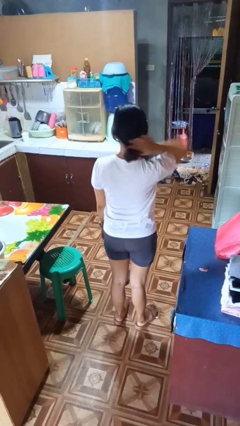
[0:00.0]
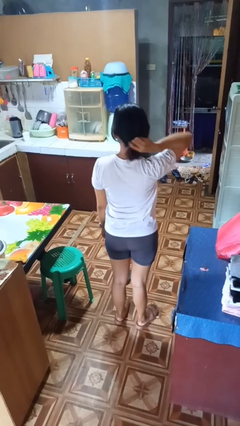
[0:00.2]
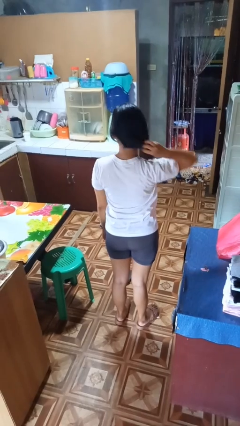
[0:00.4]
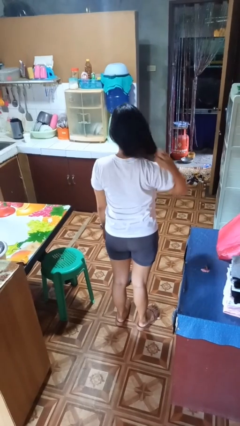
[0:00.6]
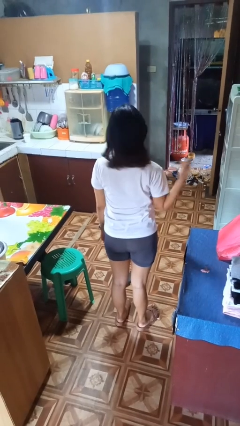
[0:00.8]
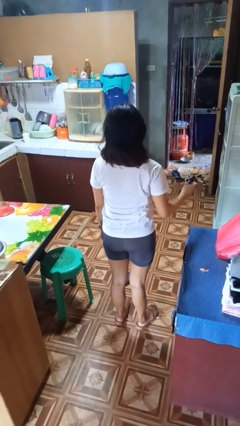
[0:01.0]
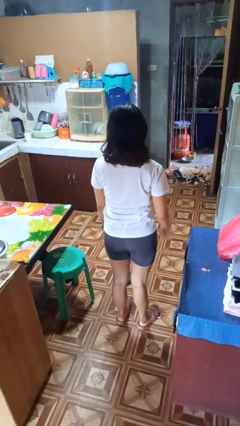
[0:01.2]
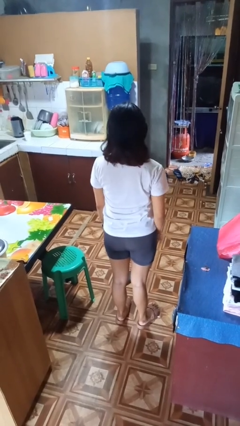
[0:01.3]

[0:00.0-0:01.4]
person takes off hairtie

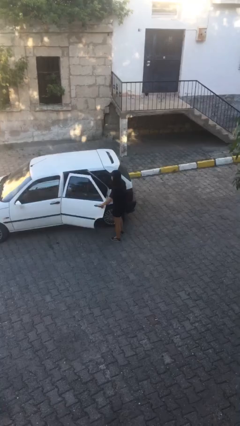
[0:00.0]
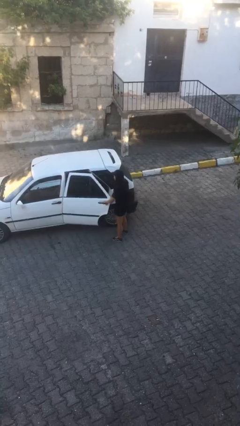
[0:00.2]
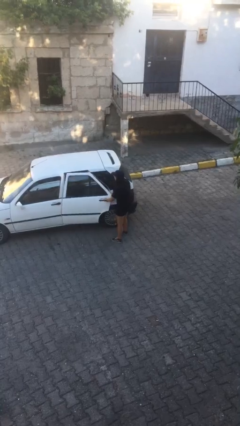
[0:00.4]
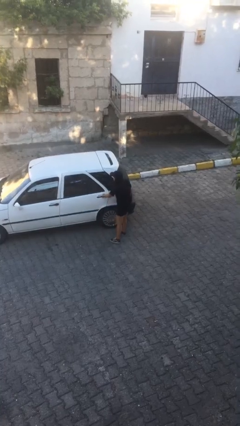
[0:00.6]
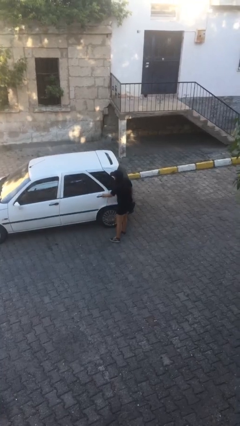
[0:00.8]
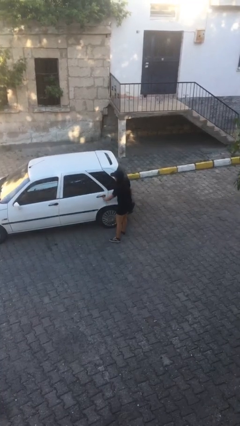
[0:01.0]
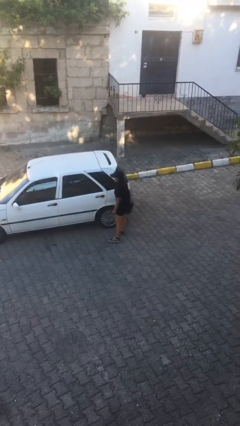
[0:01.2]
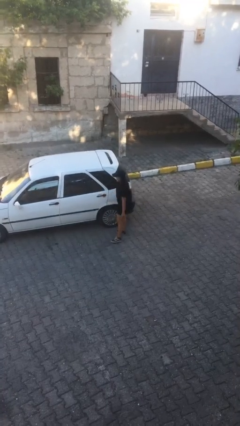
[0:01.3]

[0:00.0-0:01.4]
person closes car door

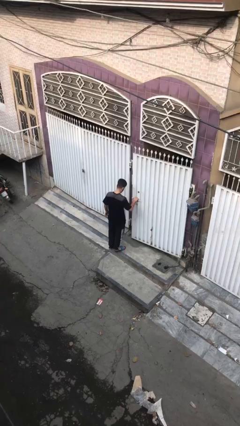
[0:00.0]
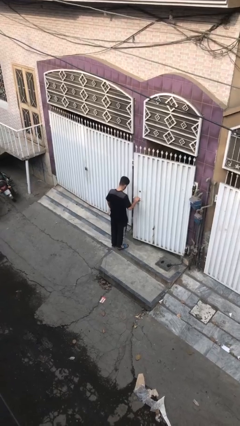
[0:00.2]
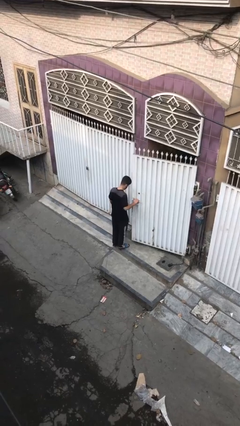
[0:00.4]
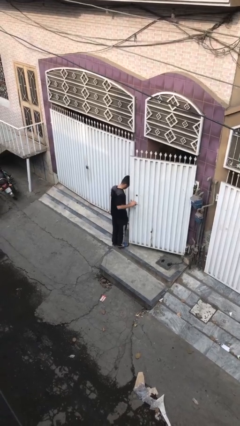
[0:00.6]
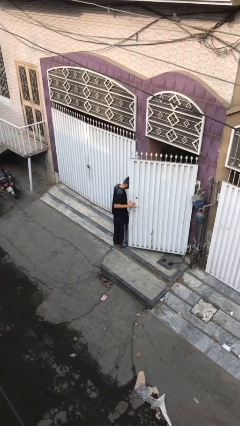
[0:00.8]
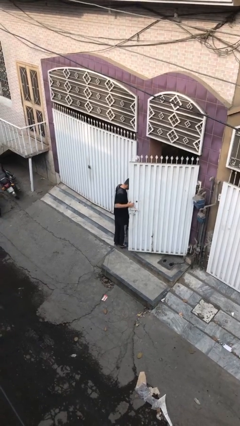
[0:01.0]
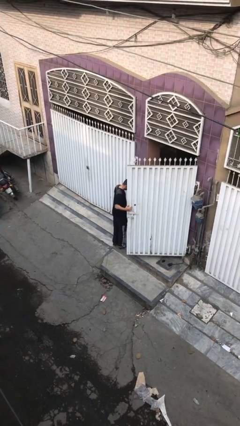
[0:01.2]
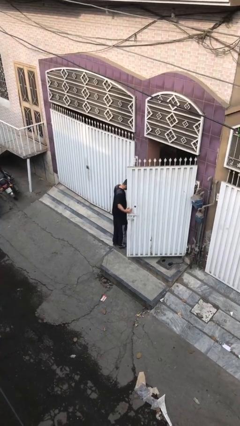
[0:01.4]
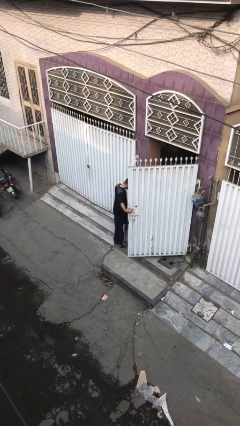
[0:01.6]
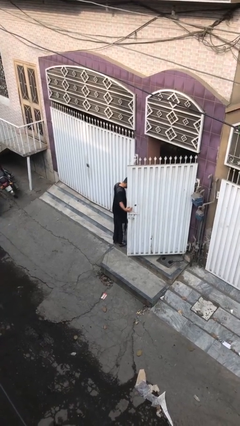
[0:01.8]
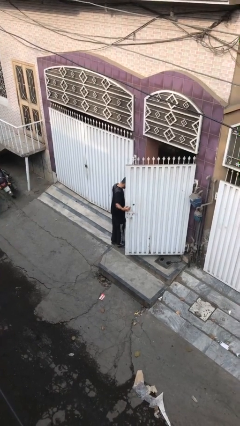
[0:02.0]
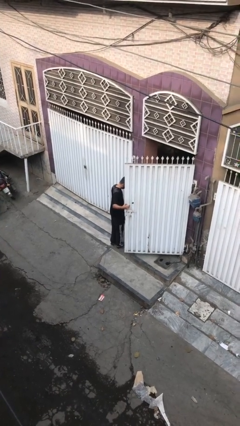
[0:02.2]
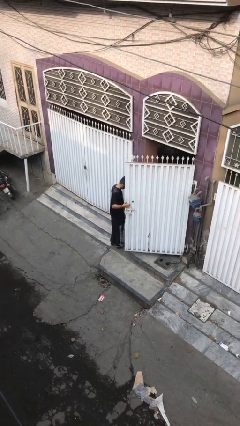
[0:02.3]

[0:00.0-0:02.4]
person opens facility door

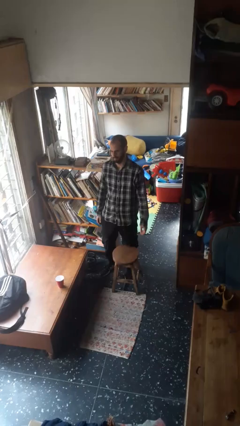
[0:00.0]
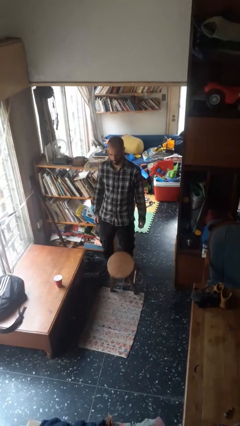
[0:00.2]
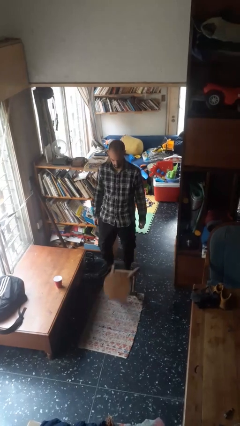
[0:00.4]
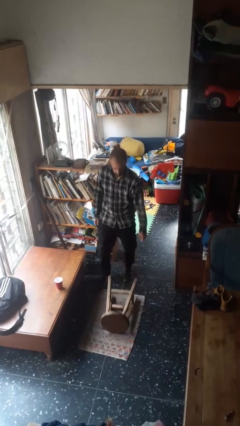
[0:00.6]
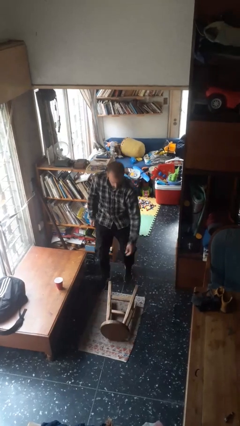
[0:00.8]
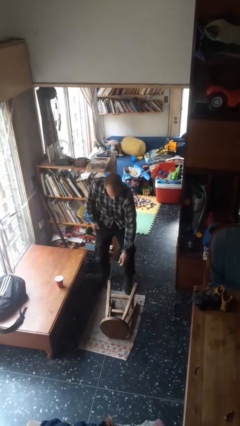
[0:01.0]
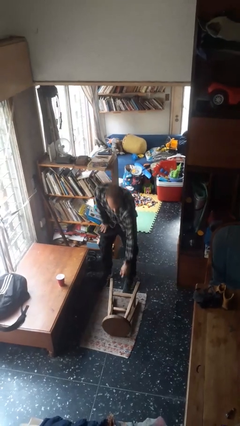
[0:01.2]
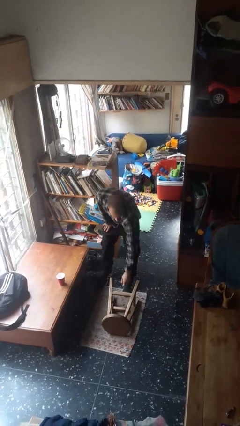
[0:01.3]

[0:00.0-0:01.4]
person knocks over furniture

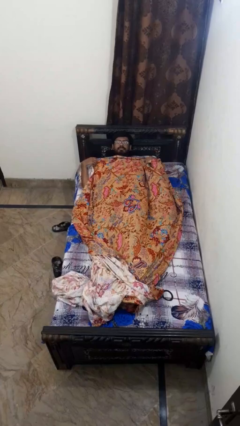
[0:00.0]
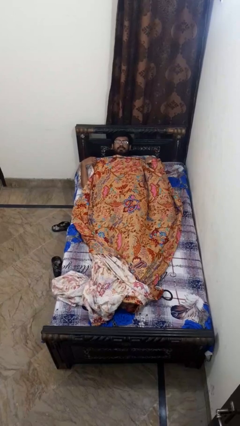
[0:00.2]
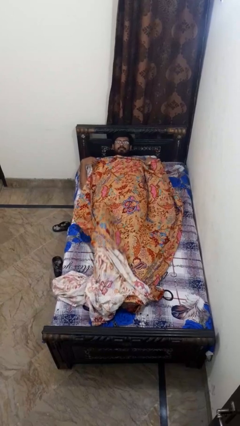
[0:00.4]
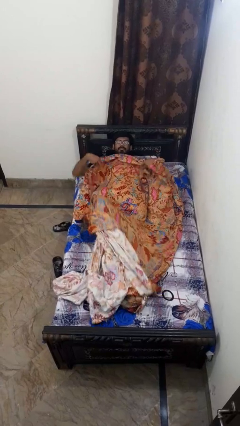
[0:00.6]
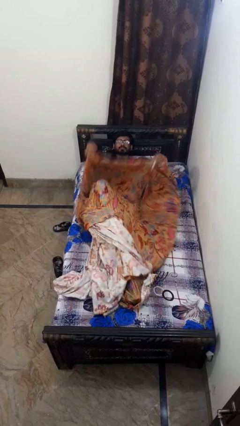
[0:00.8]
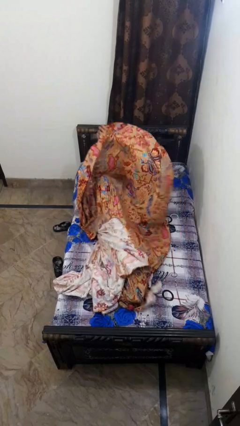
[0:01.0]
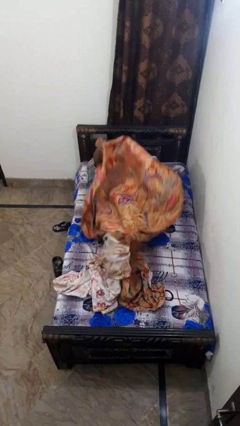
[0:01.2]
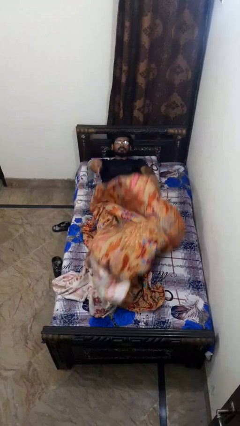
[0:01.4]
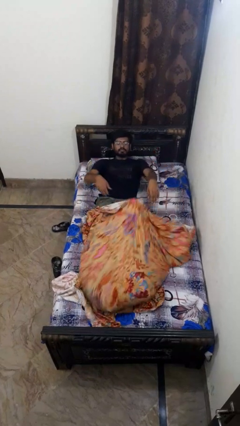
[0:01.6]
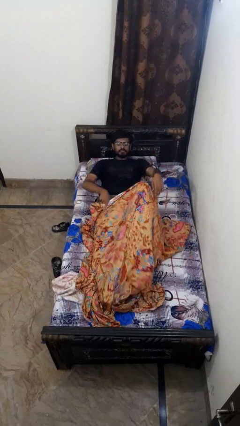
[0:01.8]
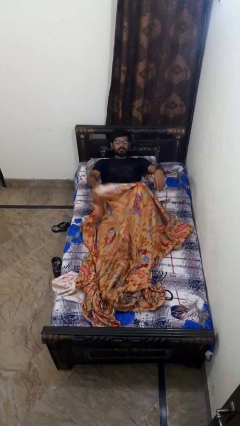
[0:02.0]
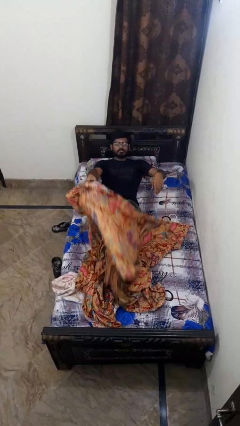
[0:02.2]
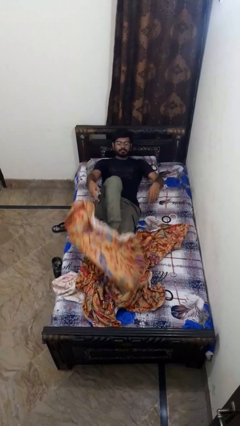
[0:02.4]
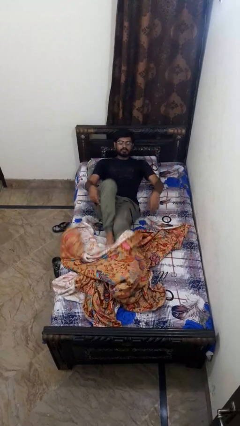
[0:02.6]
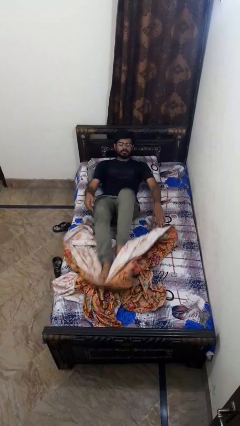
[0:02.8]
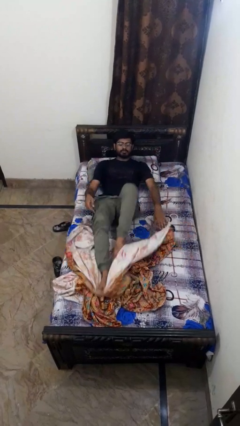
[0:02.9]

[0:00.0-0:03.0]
person uncovers with bedsheets

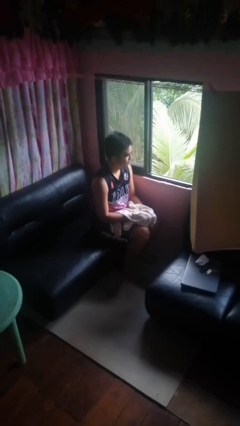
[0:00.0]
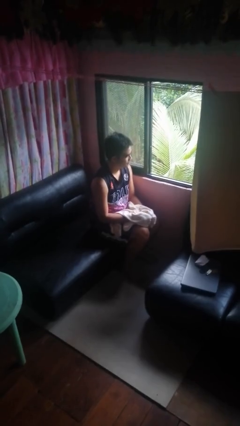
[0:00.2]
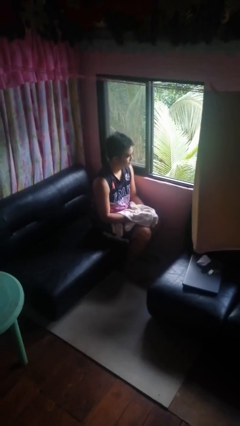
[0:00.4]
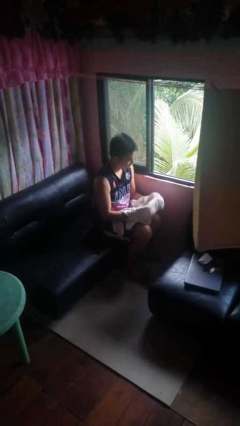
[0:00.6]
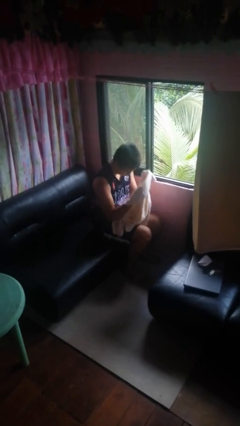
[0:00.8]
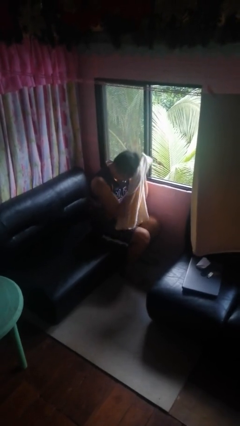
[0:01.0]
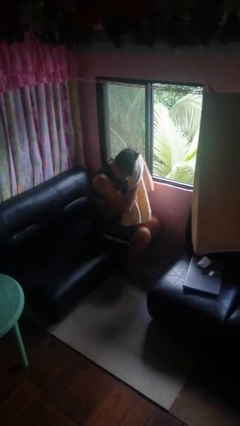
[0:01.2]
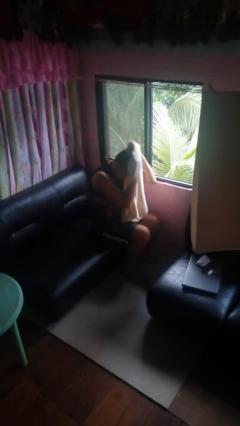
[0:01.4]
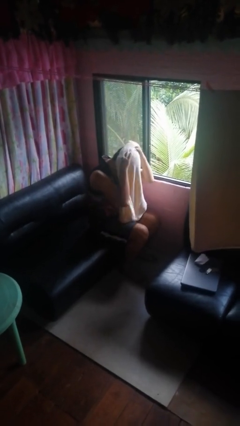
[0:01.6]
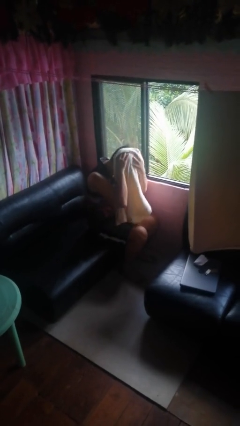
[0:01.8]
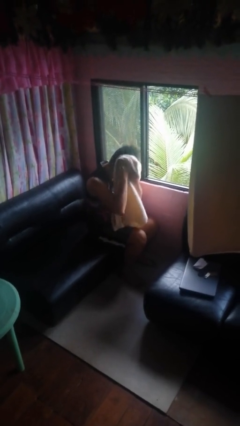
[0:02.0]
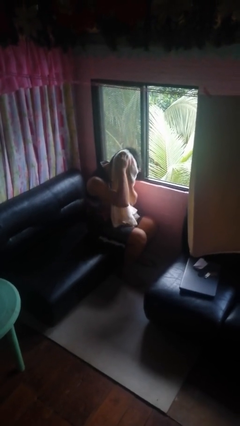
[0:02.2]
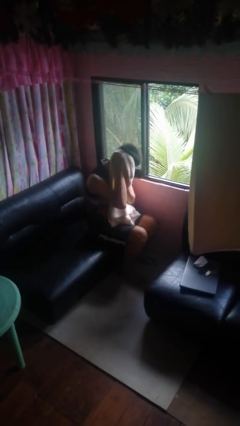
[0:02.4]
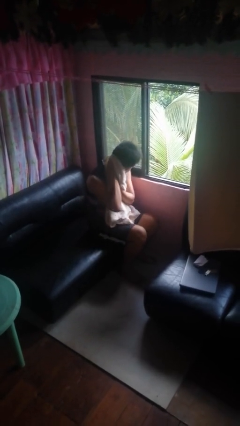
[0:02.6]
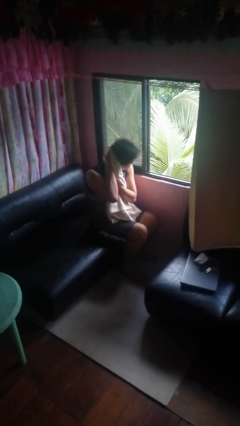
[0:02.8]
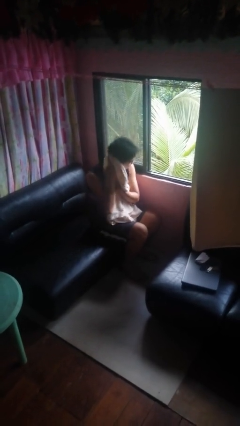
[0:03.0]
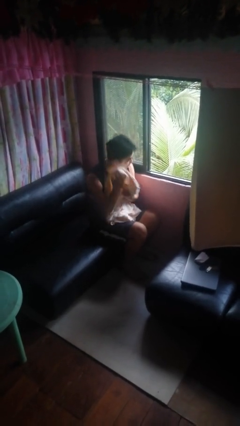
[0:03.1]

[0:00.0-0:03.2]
person dries hair with towel

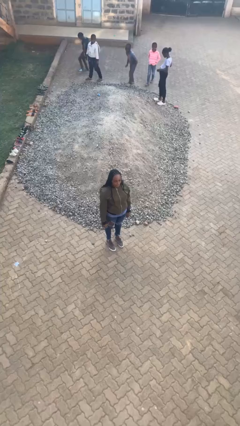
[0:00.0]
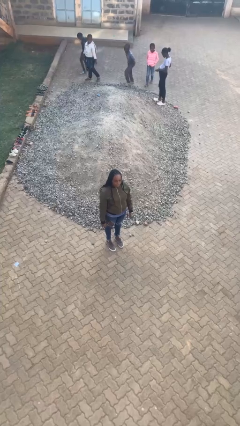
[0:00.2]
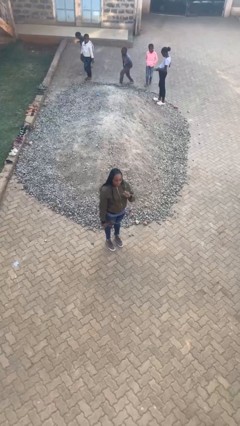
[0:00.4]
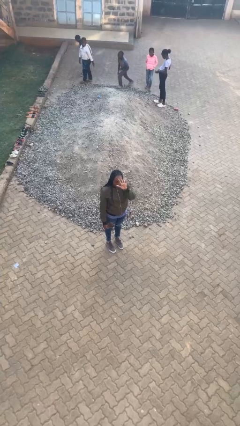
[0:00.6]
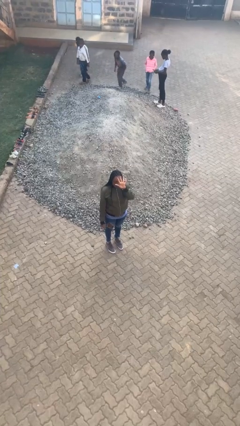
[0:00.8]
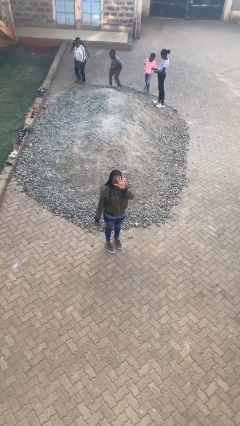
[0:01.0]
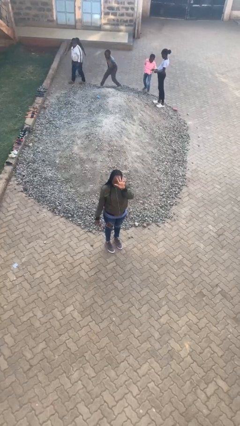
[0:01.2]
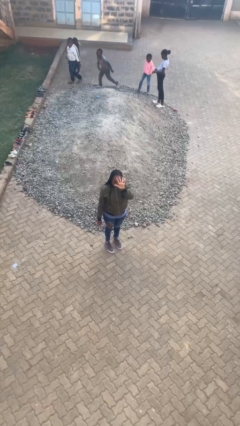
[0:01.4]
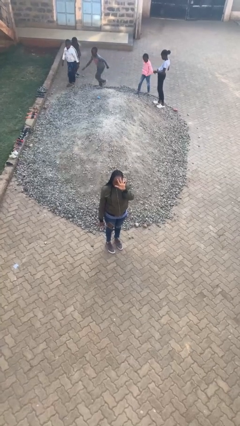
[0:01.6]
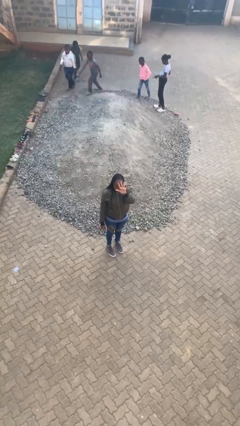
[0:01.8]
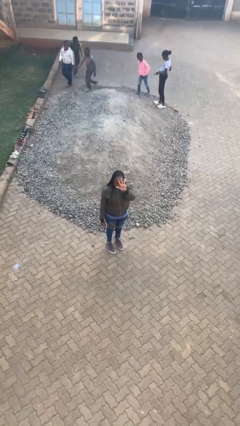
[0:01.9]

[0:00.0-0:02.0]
person gestures number five

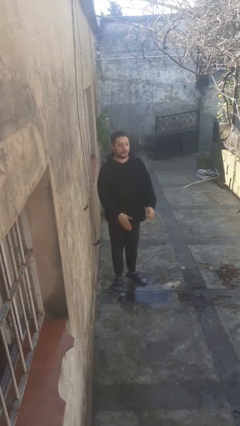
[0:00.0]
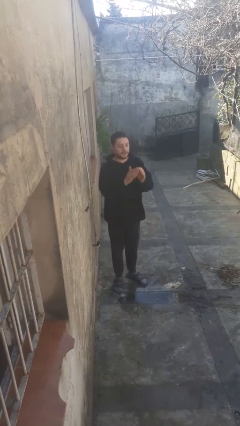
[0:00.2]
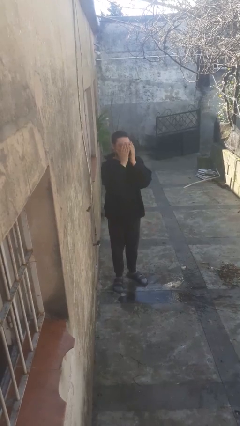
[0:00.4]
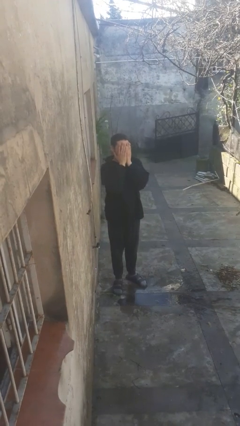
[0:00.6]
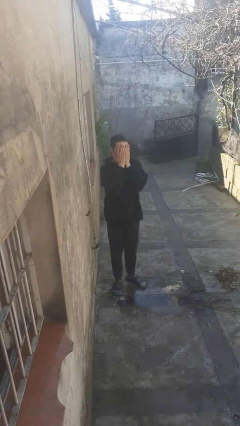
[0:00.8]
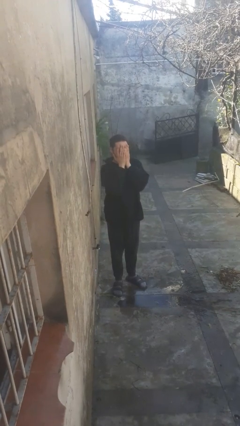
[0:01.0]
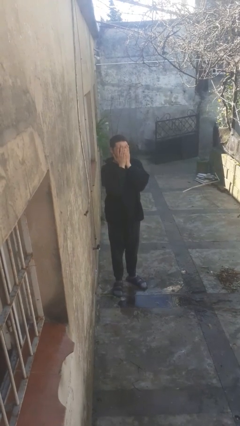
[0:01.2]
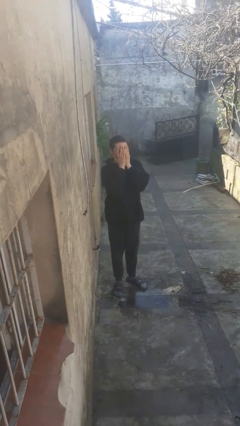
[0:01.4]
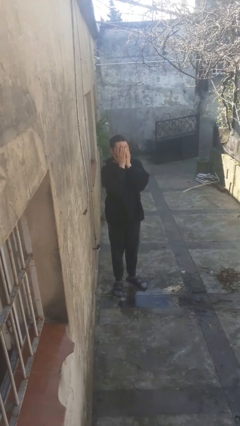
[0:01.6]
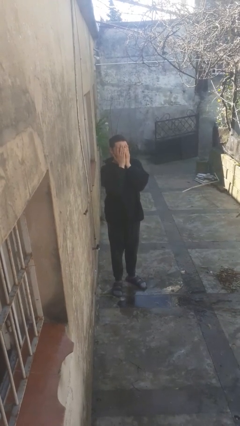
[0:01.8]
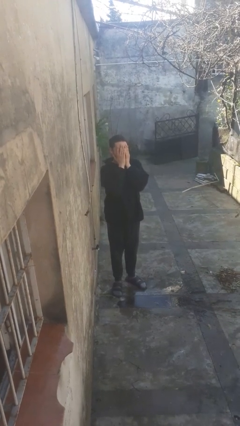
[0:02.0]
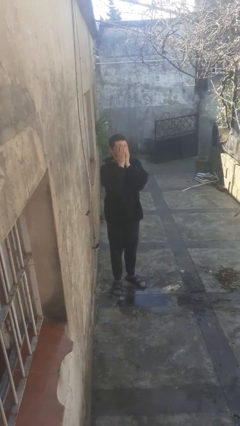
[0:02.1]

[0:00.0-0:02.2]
person covers face with hands
